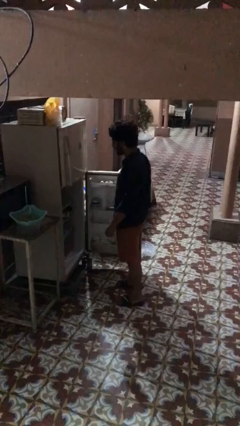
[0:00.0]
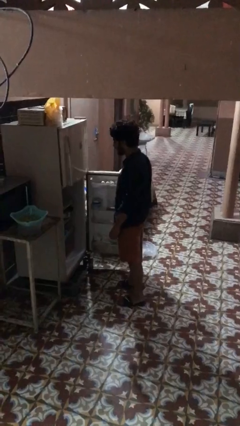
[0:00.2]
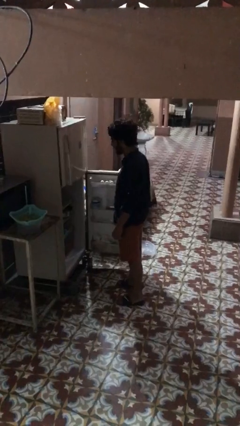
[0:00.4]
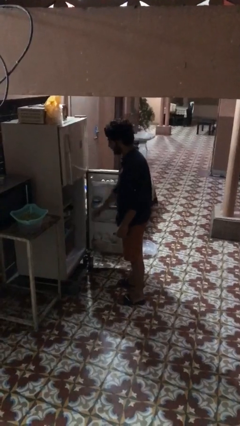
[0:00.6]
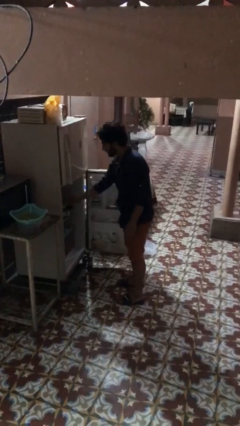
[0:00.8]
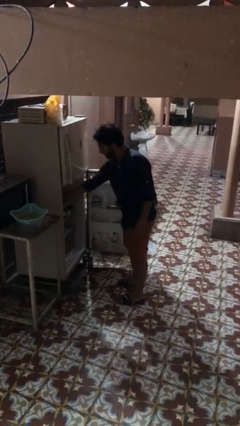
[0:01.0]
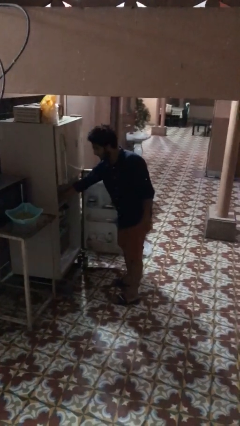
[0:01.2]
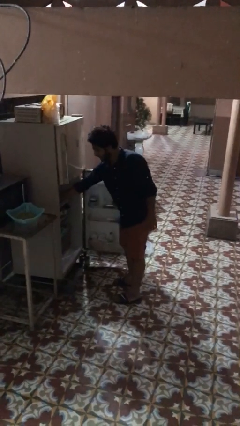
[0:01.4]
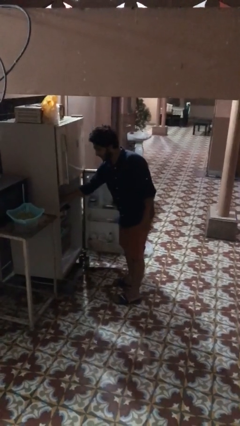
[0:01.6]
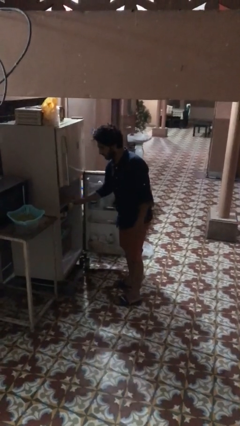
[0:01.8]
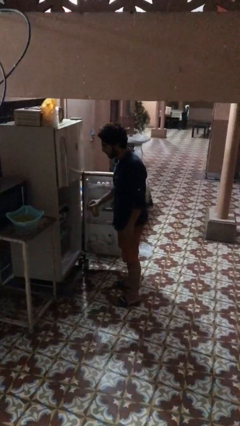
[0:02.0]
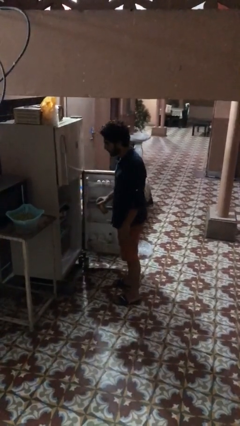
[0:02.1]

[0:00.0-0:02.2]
person takes object from refrigerator

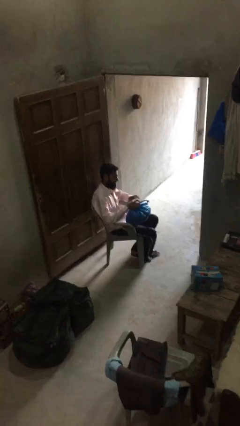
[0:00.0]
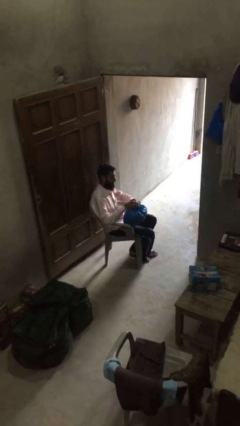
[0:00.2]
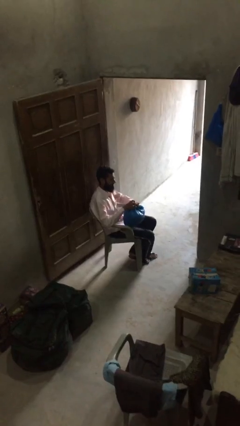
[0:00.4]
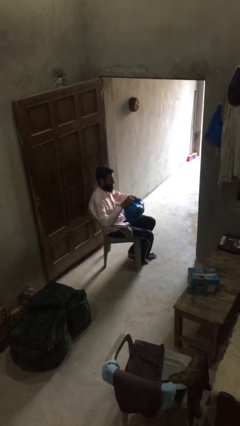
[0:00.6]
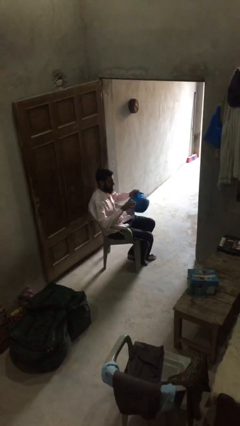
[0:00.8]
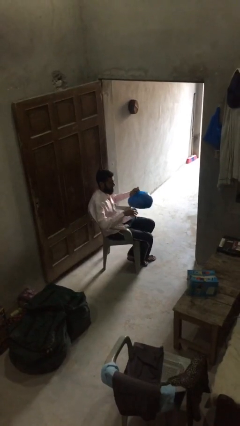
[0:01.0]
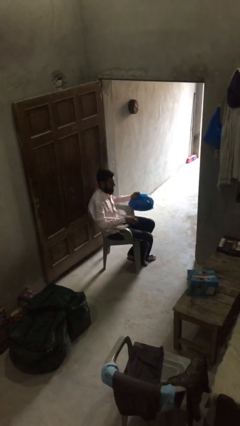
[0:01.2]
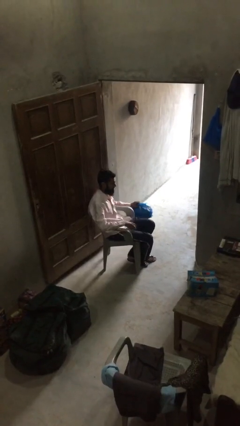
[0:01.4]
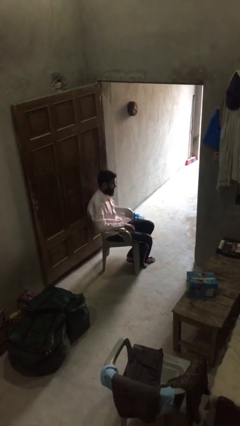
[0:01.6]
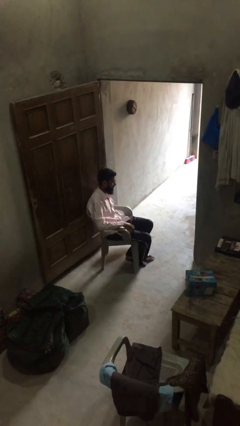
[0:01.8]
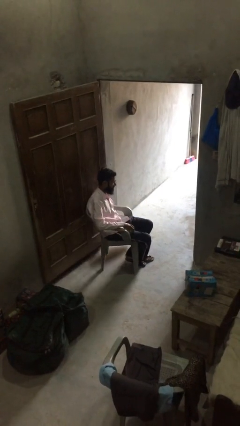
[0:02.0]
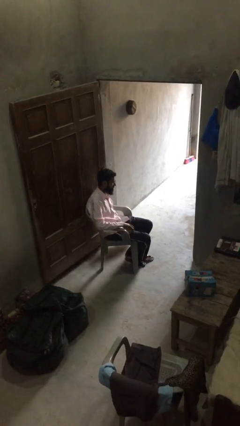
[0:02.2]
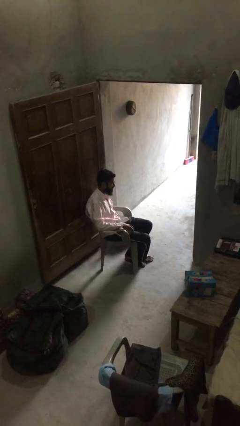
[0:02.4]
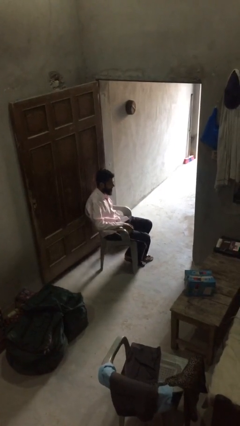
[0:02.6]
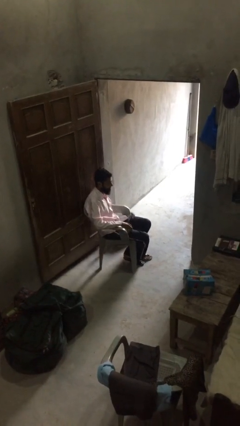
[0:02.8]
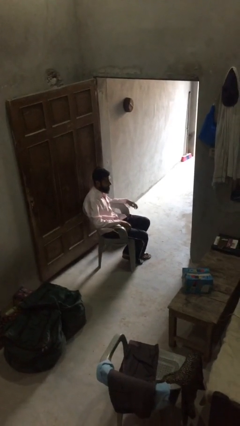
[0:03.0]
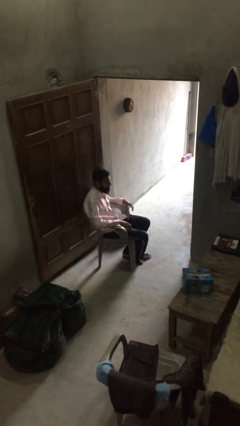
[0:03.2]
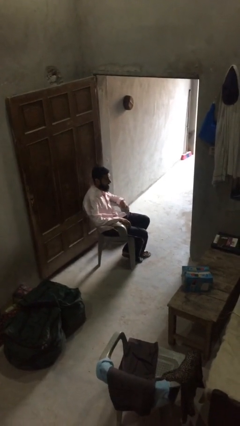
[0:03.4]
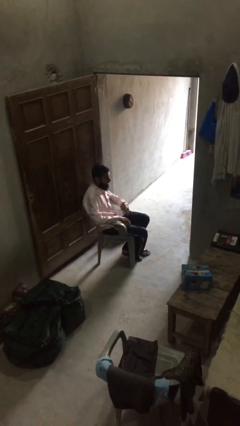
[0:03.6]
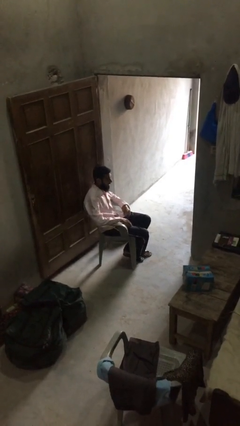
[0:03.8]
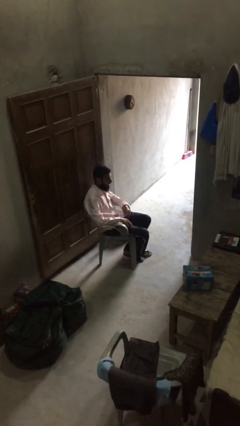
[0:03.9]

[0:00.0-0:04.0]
person puts down object on floor

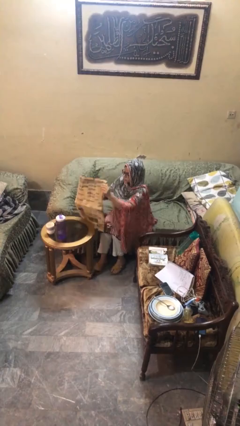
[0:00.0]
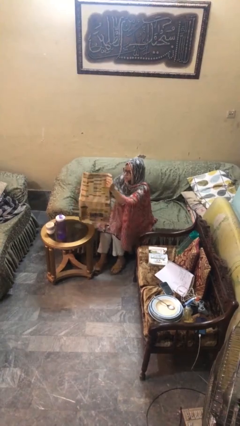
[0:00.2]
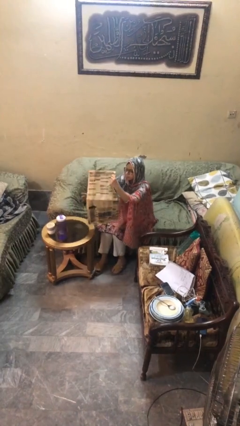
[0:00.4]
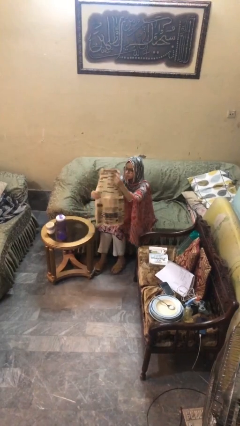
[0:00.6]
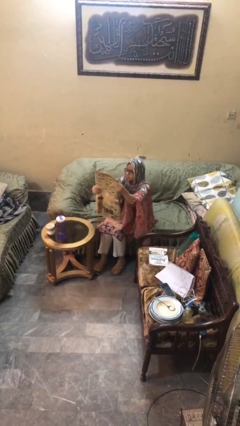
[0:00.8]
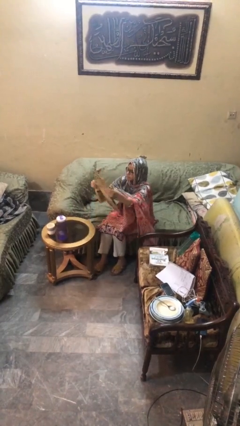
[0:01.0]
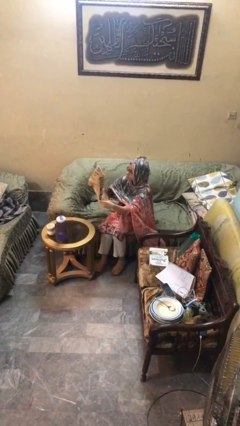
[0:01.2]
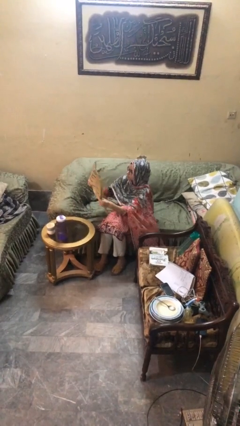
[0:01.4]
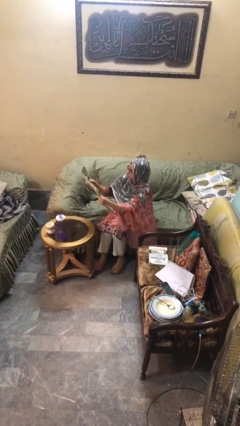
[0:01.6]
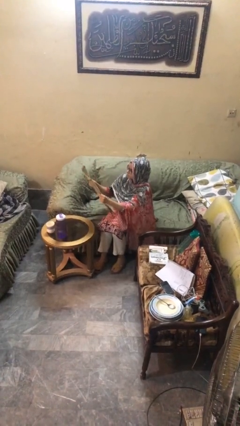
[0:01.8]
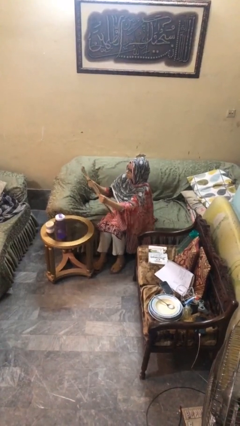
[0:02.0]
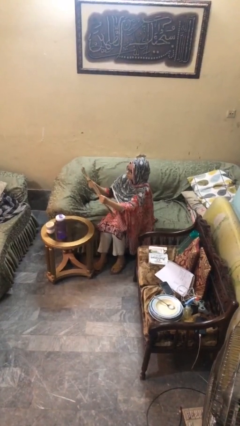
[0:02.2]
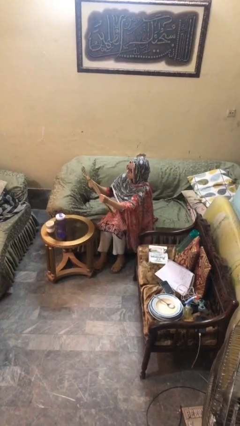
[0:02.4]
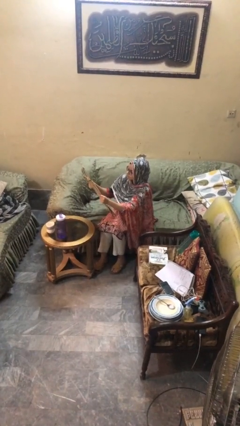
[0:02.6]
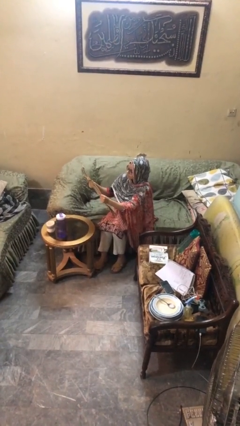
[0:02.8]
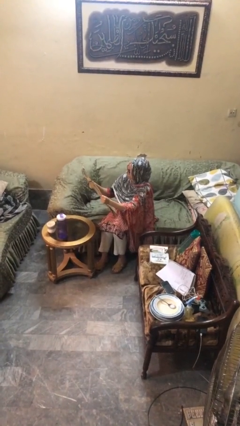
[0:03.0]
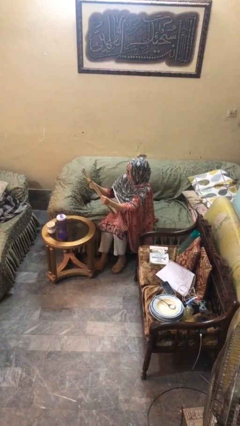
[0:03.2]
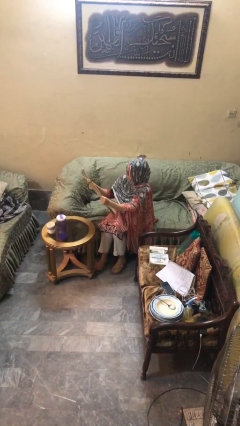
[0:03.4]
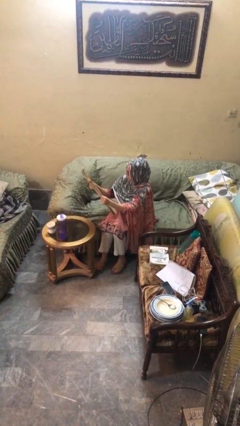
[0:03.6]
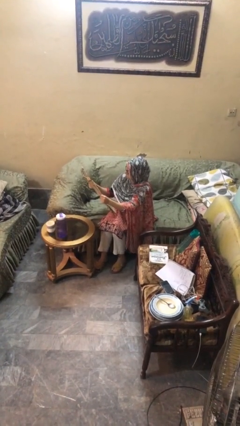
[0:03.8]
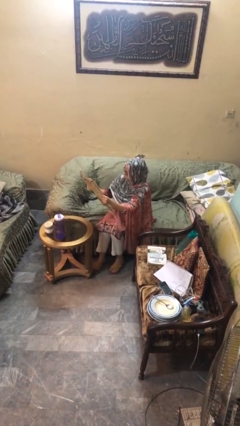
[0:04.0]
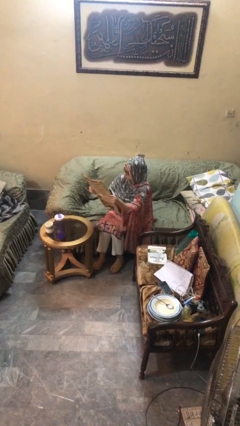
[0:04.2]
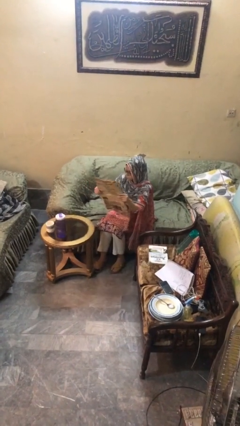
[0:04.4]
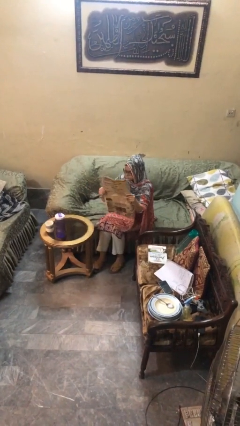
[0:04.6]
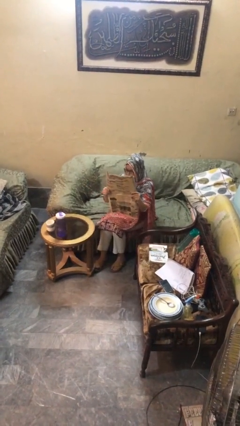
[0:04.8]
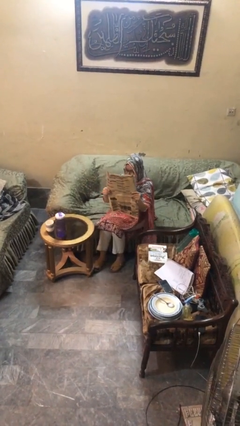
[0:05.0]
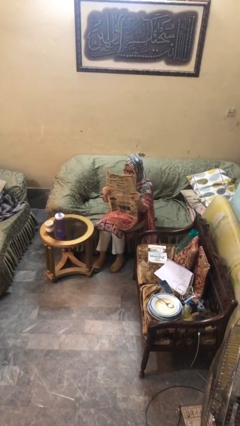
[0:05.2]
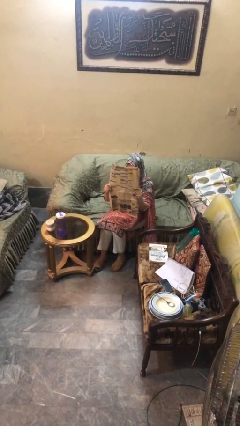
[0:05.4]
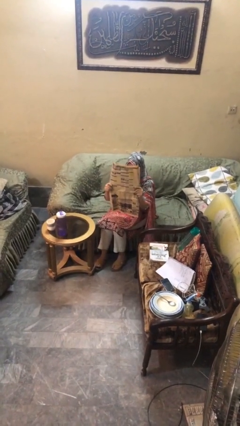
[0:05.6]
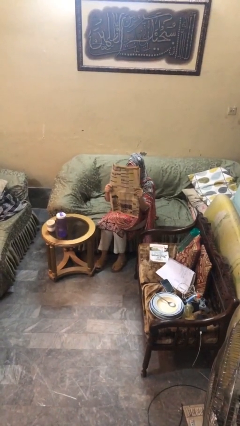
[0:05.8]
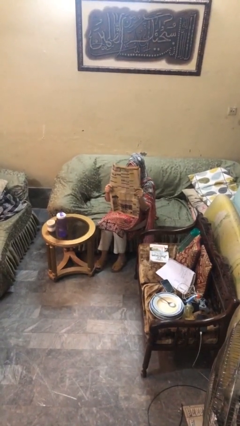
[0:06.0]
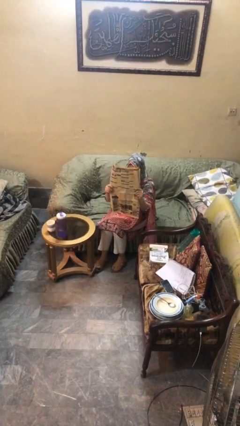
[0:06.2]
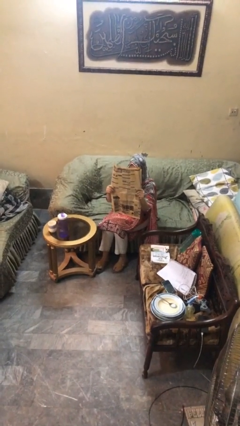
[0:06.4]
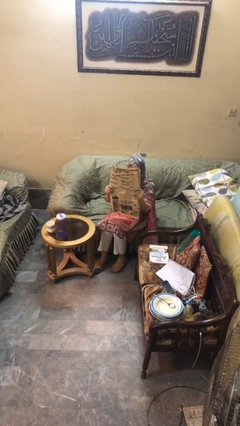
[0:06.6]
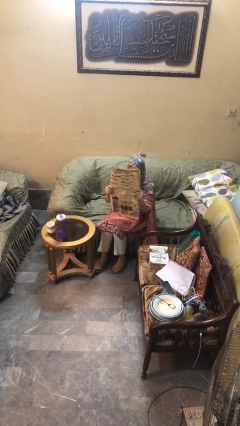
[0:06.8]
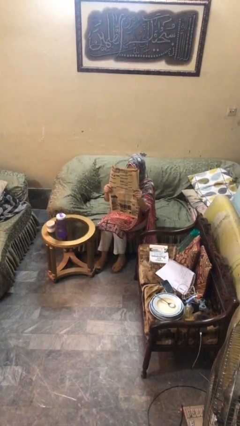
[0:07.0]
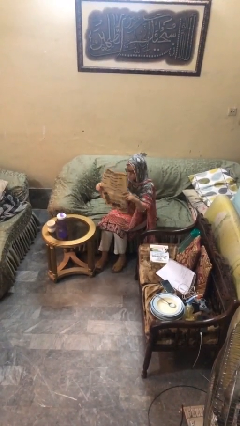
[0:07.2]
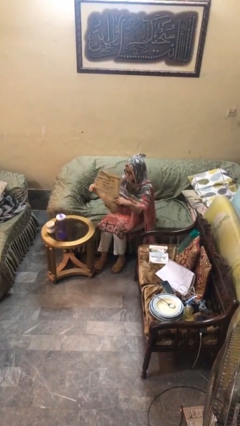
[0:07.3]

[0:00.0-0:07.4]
person reads newspaper

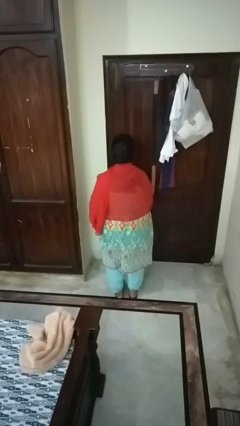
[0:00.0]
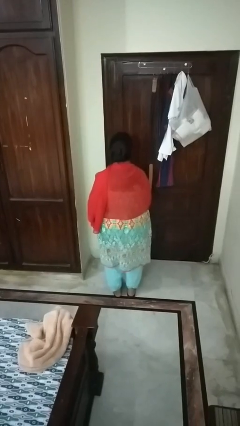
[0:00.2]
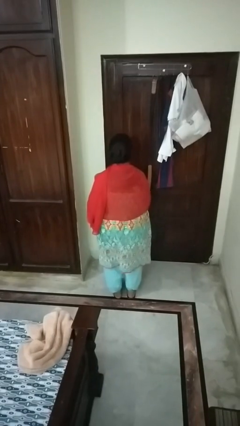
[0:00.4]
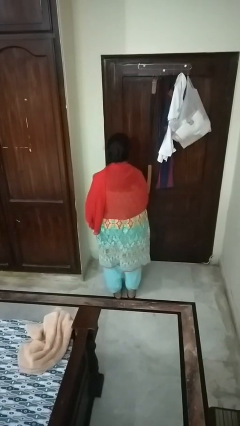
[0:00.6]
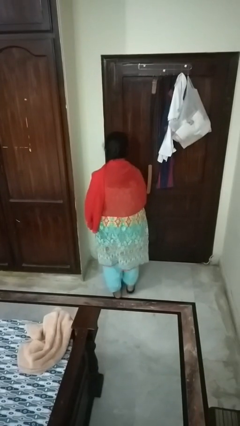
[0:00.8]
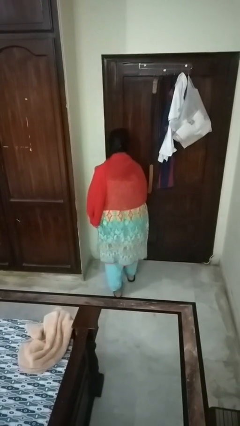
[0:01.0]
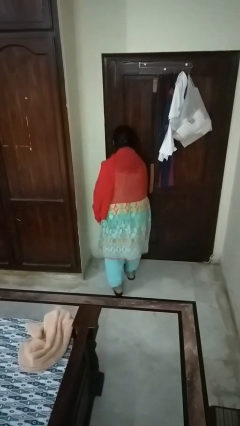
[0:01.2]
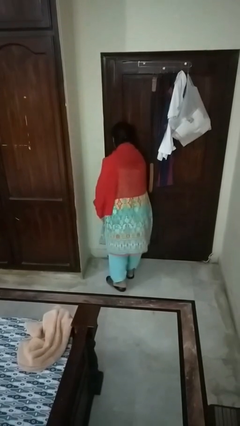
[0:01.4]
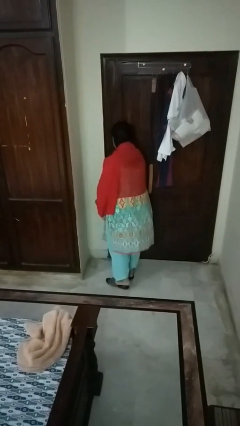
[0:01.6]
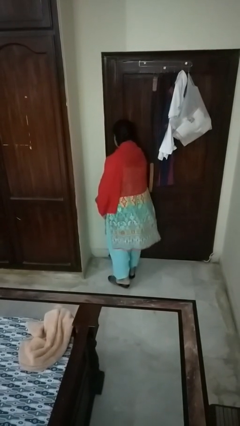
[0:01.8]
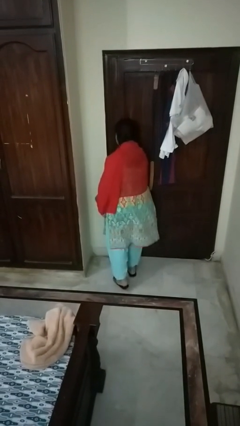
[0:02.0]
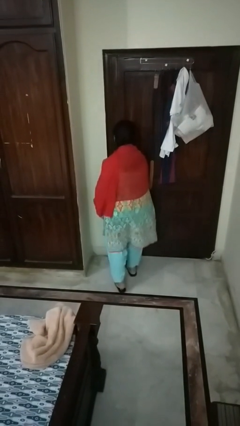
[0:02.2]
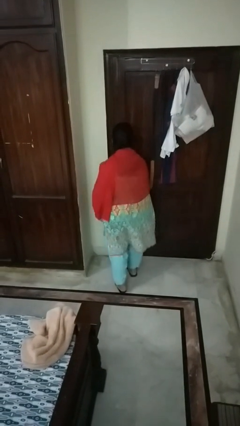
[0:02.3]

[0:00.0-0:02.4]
person bumps into wall

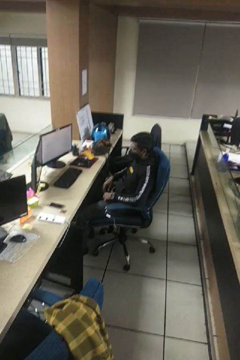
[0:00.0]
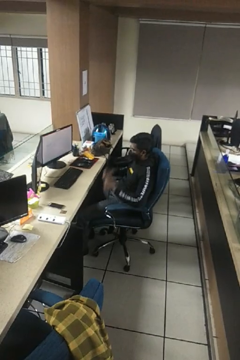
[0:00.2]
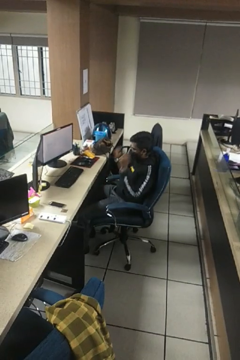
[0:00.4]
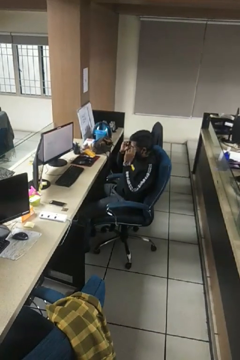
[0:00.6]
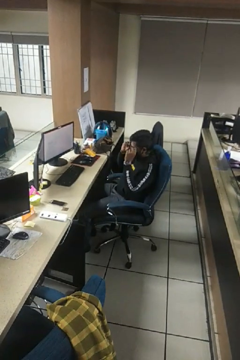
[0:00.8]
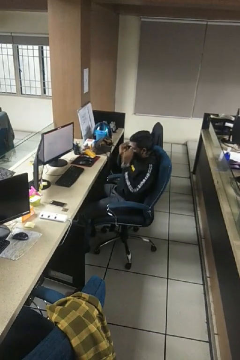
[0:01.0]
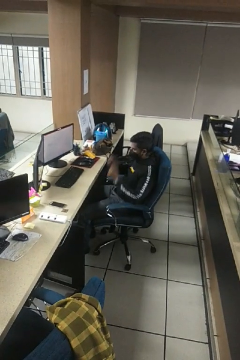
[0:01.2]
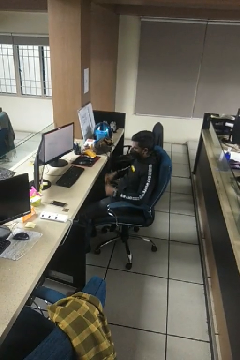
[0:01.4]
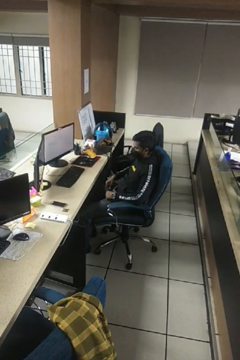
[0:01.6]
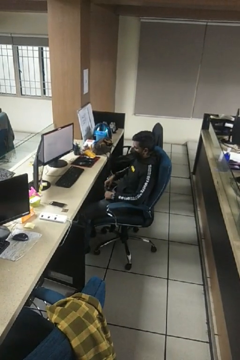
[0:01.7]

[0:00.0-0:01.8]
person takes off glasses
